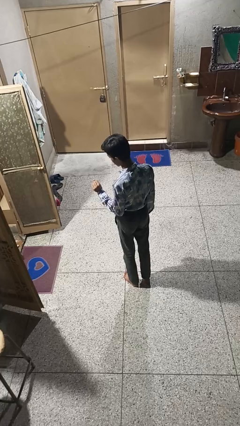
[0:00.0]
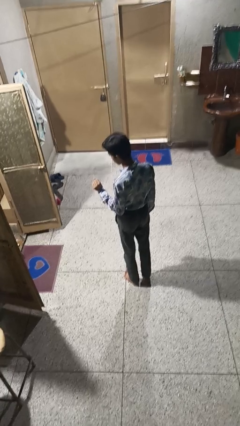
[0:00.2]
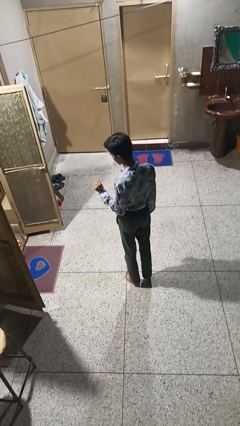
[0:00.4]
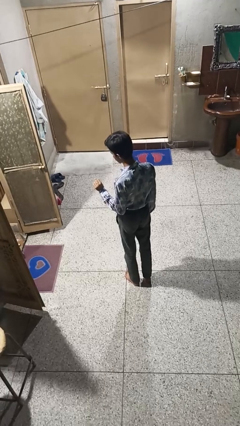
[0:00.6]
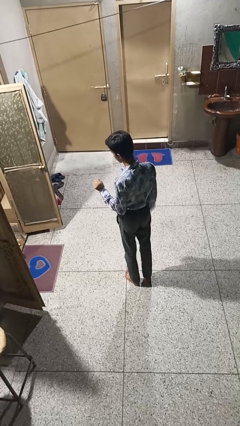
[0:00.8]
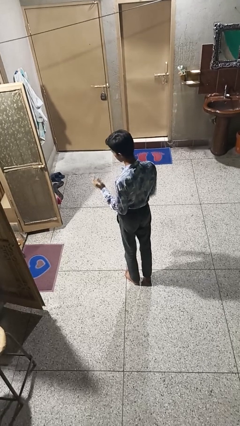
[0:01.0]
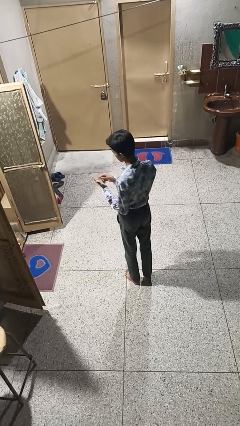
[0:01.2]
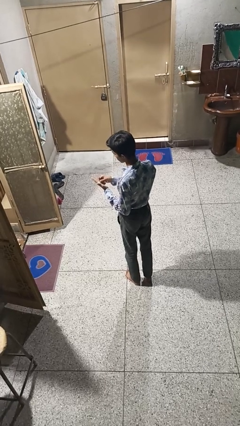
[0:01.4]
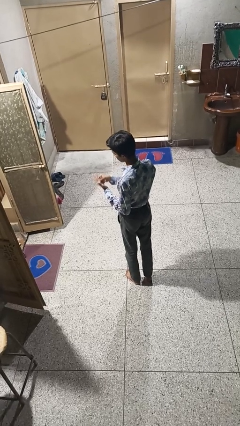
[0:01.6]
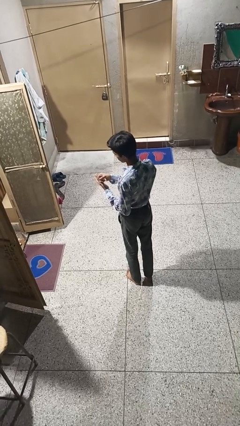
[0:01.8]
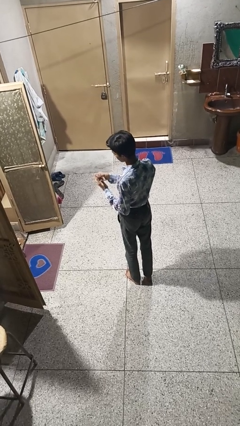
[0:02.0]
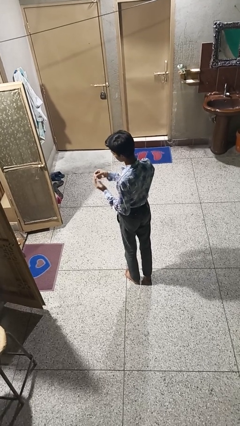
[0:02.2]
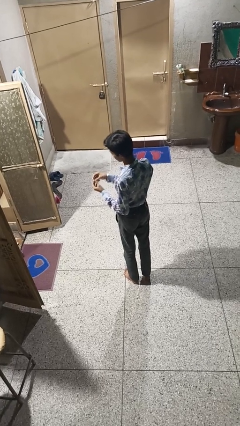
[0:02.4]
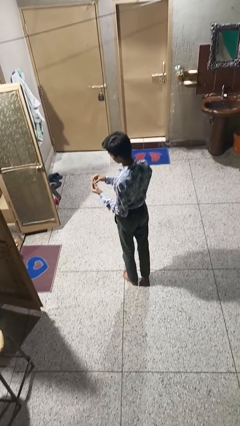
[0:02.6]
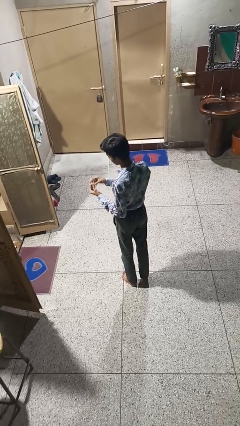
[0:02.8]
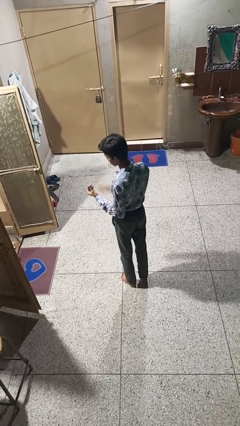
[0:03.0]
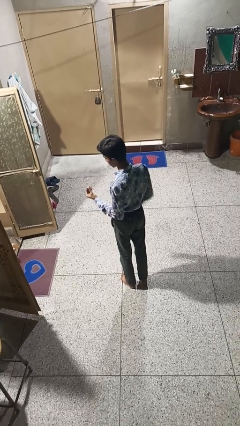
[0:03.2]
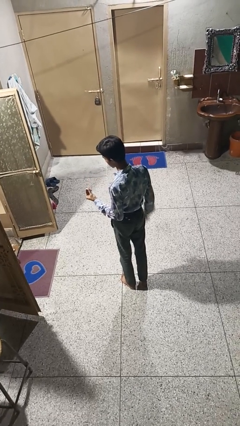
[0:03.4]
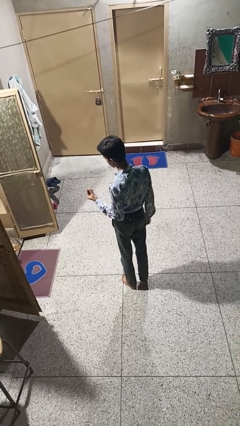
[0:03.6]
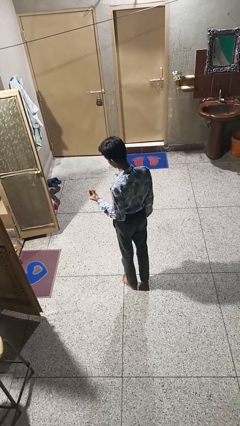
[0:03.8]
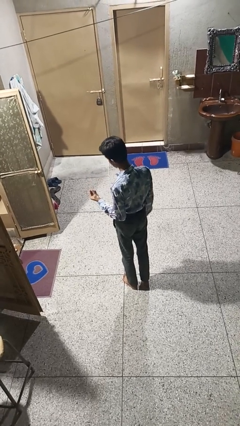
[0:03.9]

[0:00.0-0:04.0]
person takes off ring

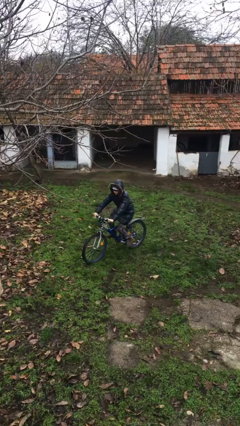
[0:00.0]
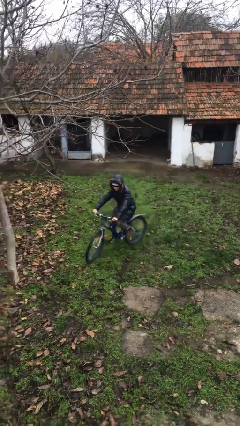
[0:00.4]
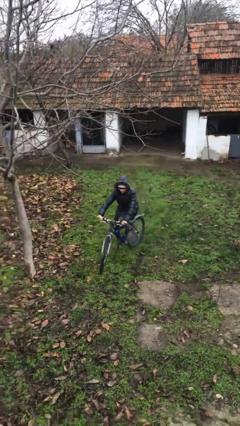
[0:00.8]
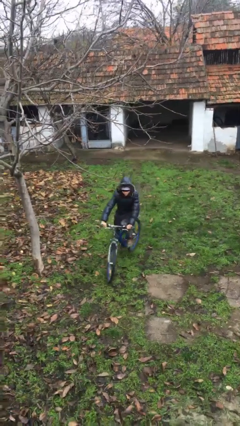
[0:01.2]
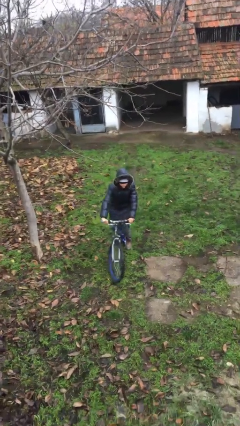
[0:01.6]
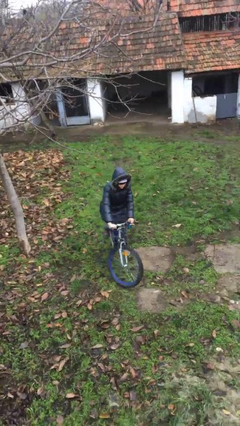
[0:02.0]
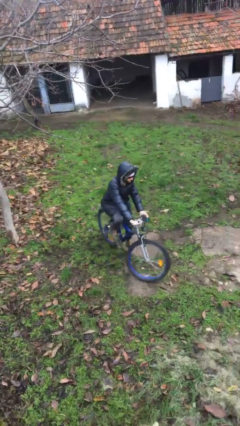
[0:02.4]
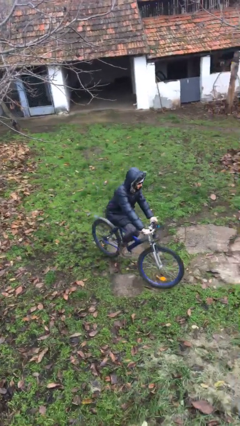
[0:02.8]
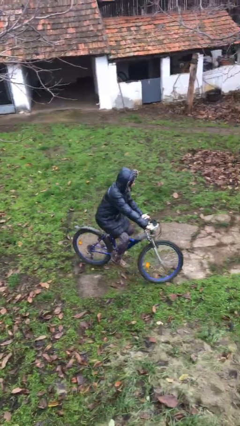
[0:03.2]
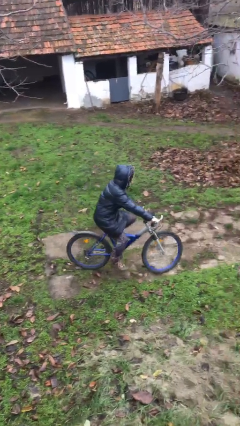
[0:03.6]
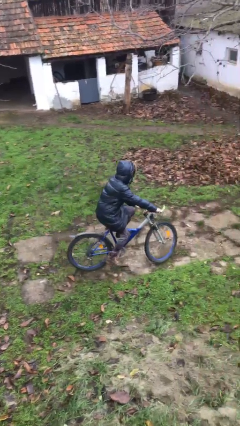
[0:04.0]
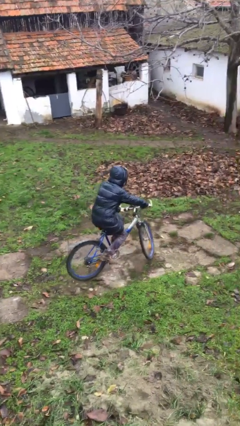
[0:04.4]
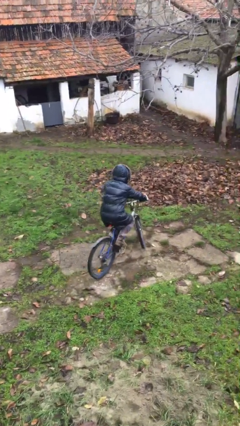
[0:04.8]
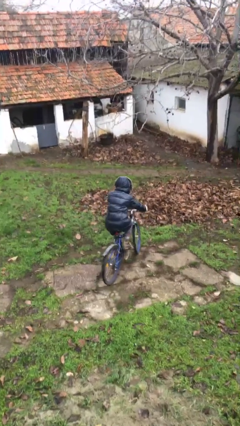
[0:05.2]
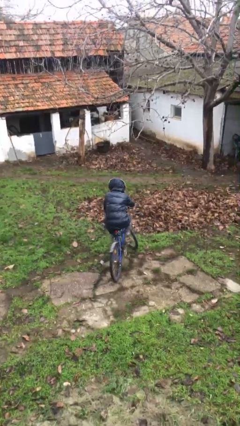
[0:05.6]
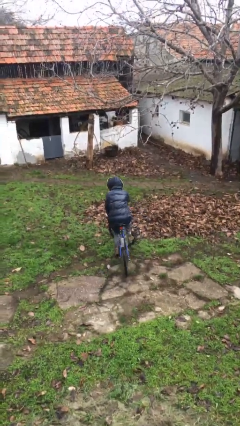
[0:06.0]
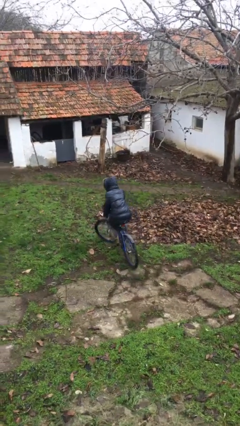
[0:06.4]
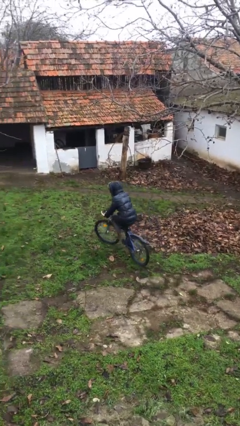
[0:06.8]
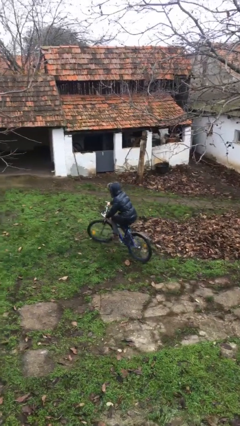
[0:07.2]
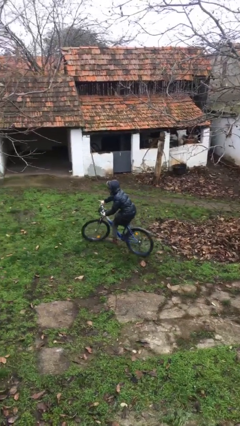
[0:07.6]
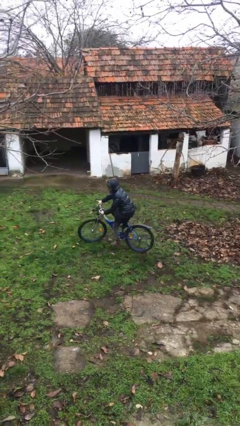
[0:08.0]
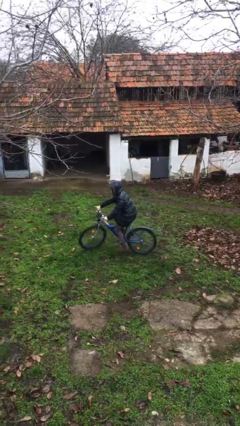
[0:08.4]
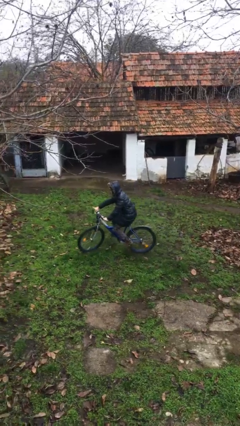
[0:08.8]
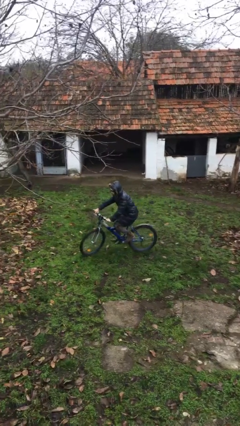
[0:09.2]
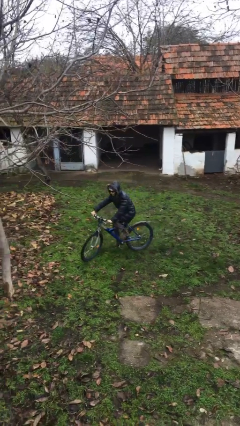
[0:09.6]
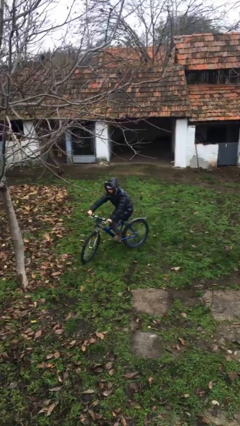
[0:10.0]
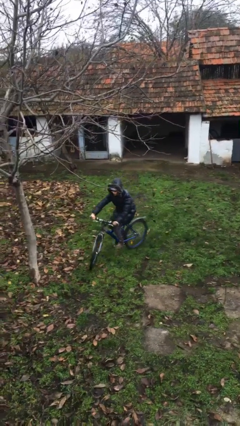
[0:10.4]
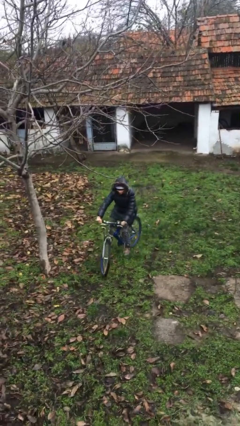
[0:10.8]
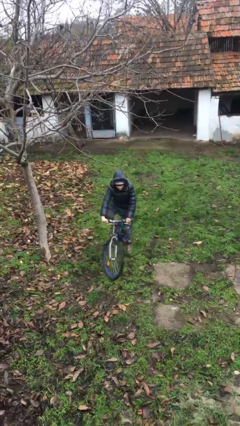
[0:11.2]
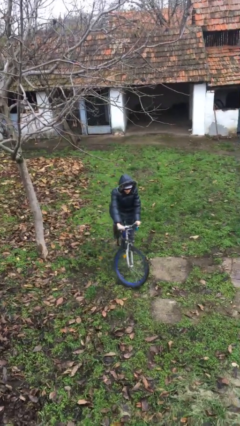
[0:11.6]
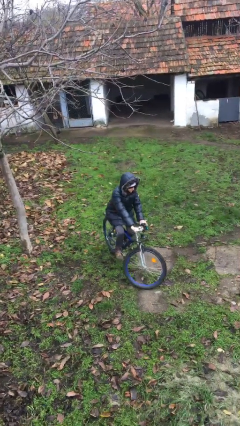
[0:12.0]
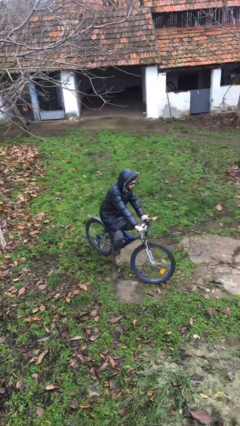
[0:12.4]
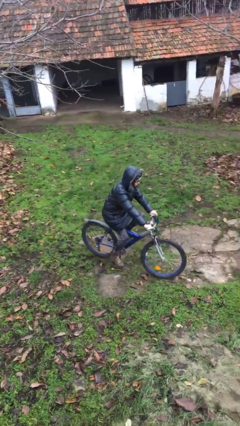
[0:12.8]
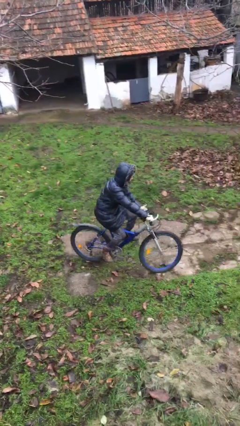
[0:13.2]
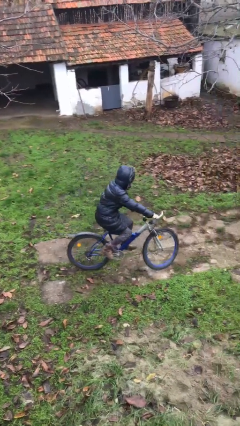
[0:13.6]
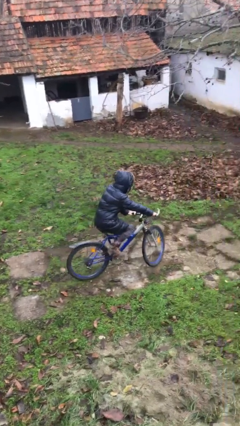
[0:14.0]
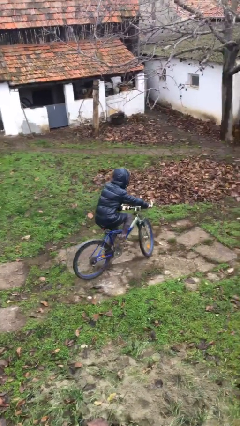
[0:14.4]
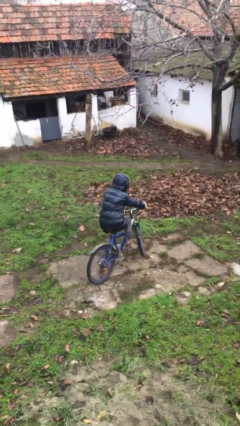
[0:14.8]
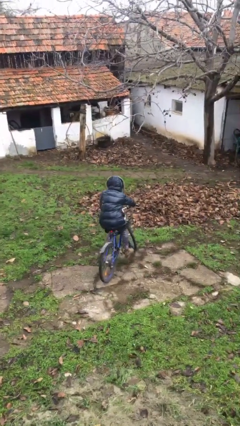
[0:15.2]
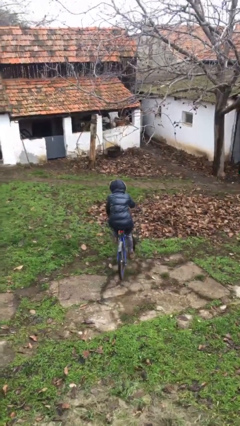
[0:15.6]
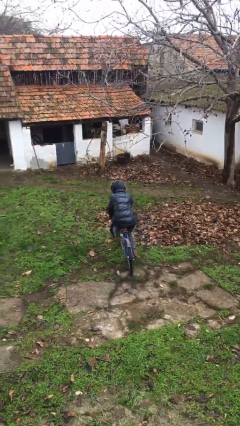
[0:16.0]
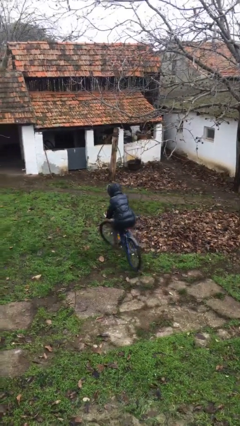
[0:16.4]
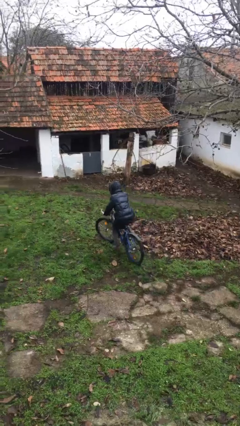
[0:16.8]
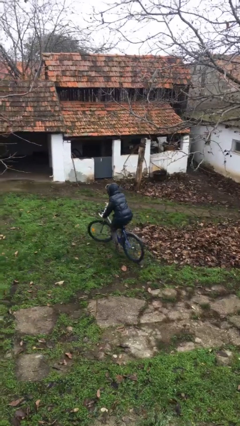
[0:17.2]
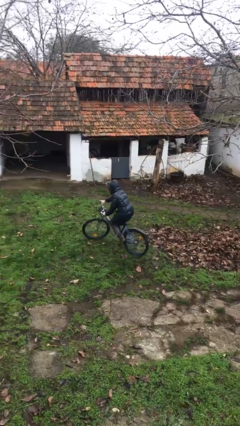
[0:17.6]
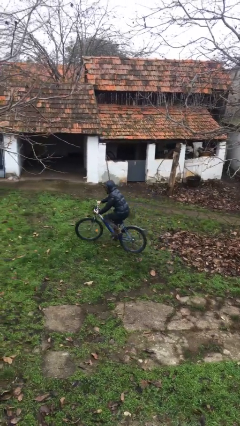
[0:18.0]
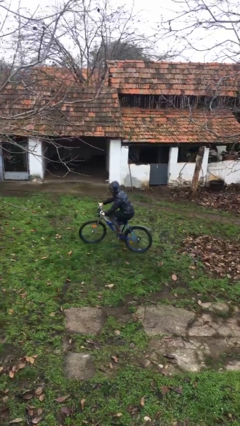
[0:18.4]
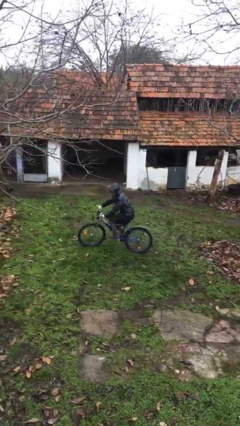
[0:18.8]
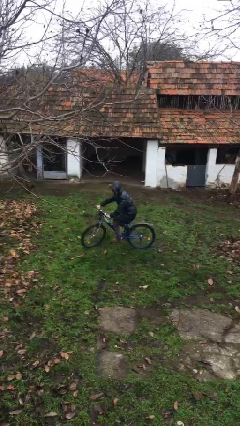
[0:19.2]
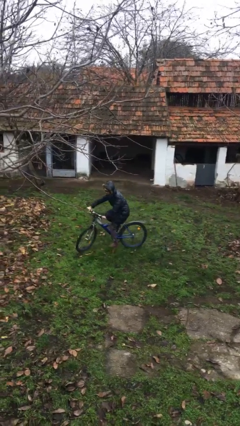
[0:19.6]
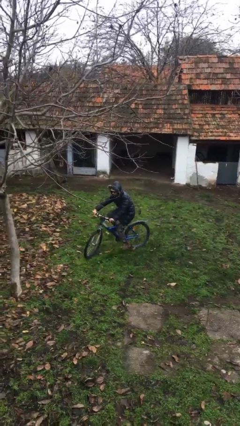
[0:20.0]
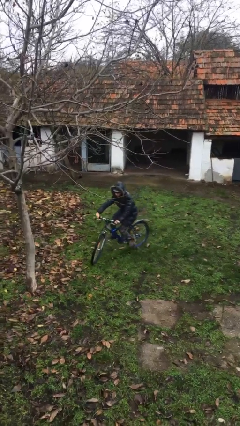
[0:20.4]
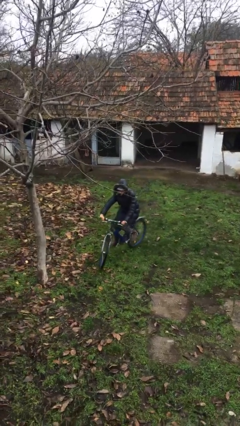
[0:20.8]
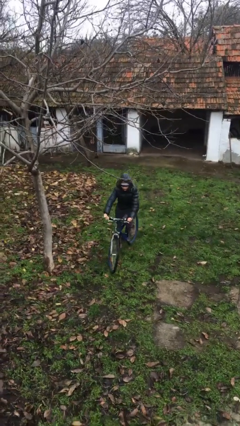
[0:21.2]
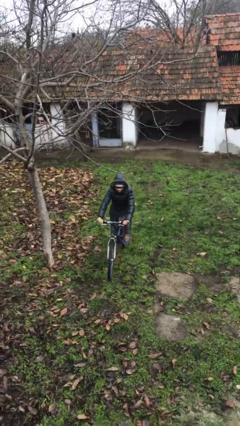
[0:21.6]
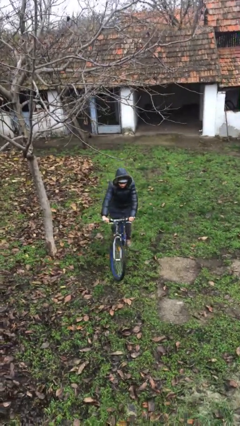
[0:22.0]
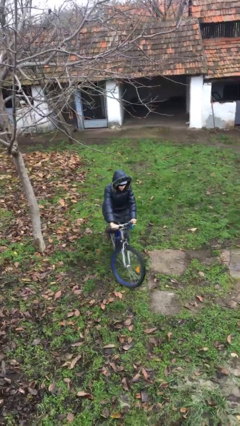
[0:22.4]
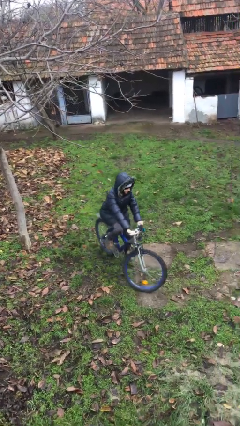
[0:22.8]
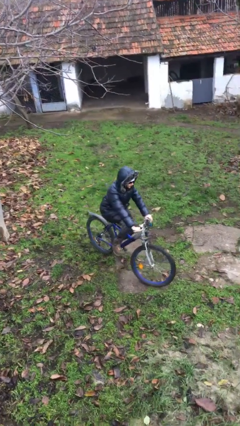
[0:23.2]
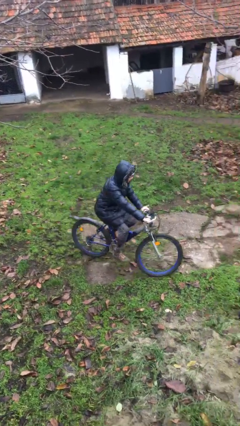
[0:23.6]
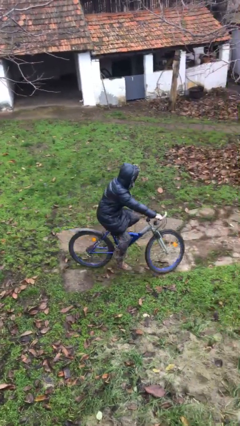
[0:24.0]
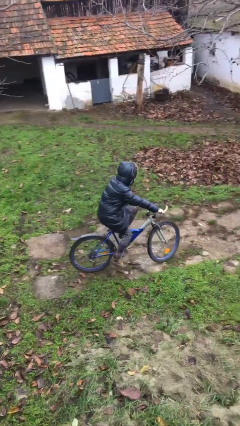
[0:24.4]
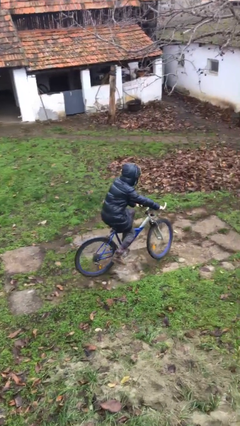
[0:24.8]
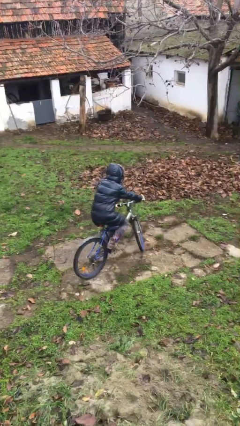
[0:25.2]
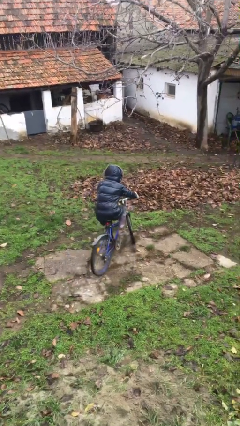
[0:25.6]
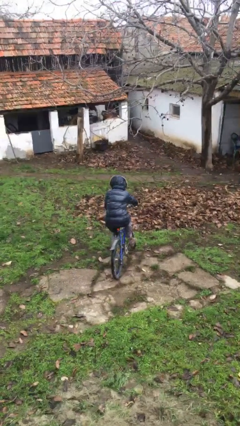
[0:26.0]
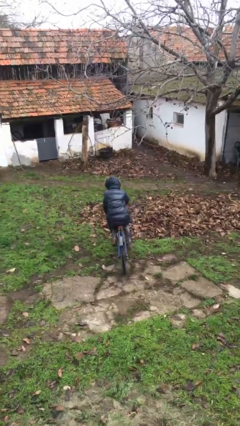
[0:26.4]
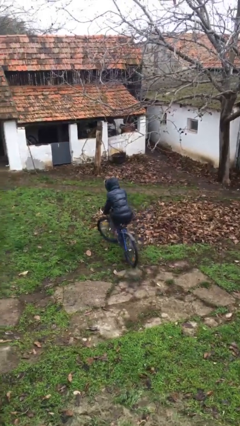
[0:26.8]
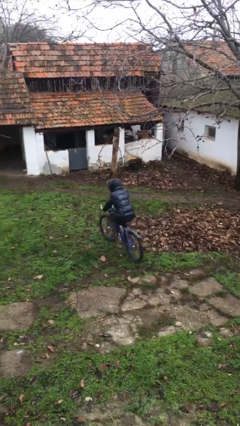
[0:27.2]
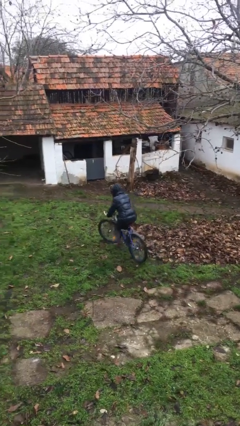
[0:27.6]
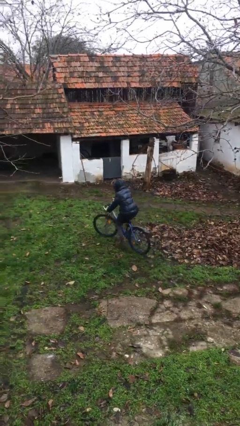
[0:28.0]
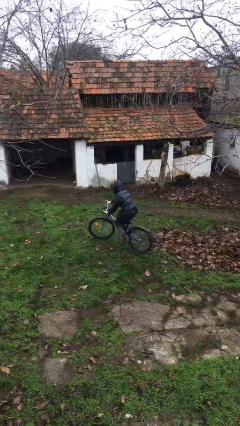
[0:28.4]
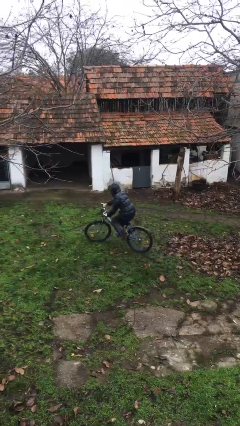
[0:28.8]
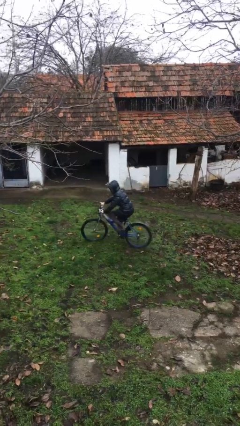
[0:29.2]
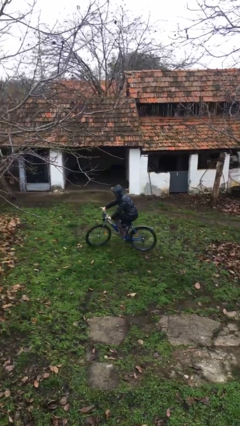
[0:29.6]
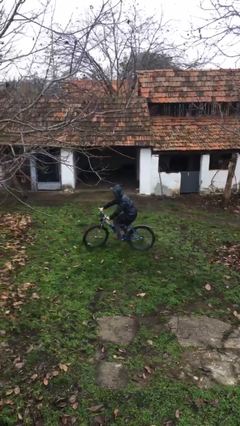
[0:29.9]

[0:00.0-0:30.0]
person rides bicycle
